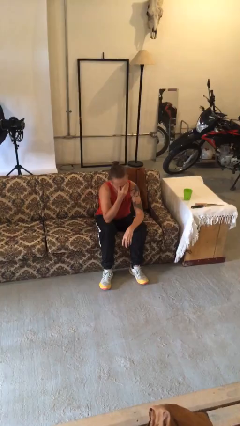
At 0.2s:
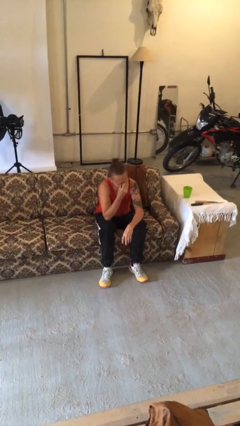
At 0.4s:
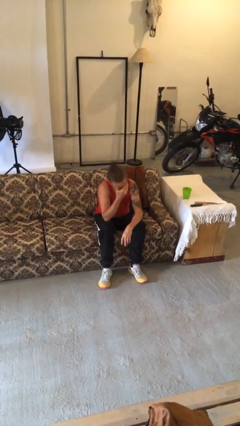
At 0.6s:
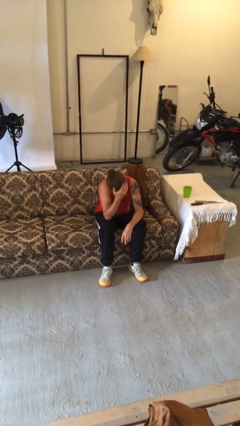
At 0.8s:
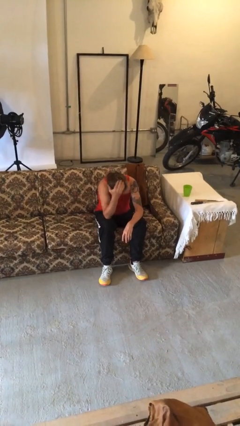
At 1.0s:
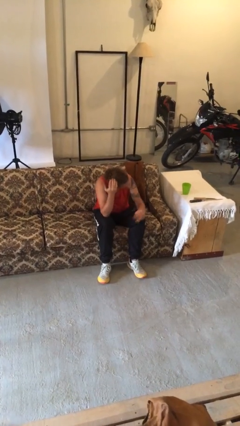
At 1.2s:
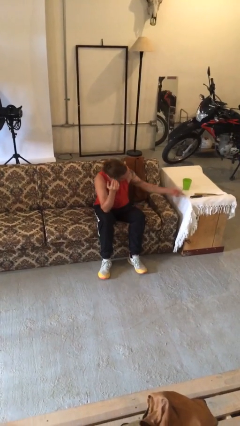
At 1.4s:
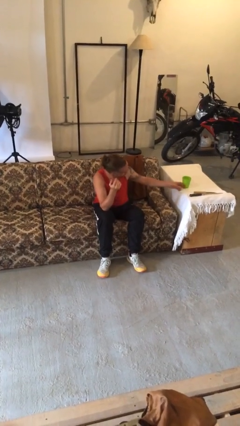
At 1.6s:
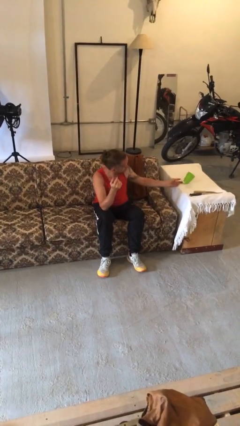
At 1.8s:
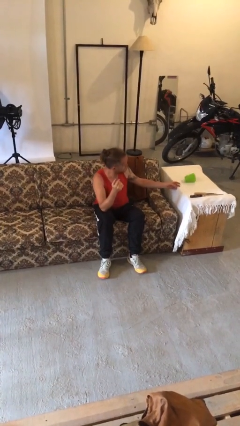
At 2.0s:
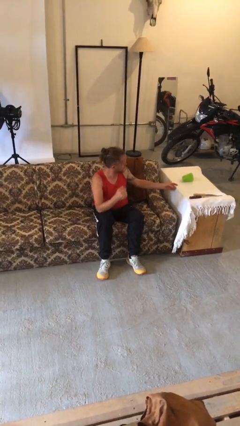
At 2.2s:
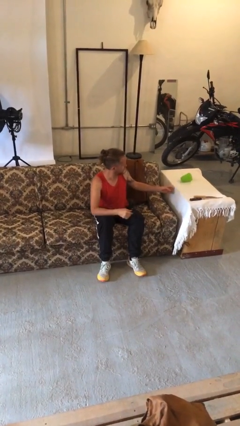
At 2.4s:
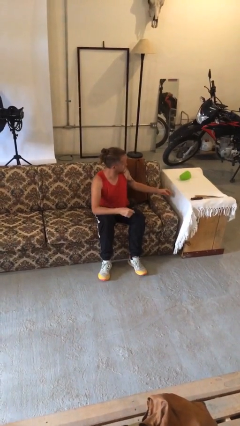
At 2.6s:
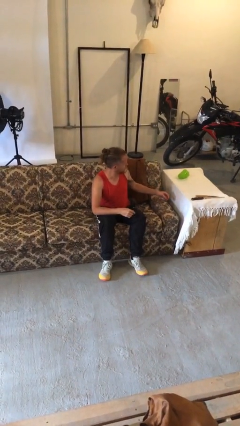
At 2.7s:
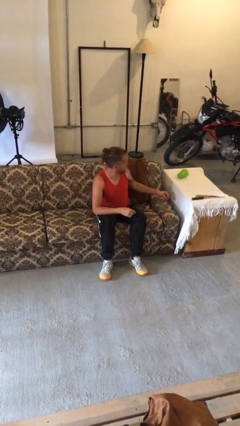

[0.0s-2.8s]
person knocks over glass

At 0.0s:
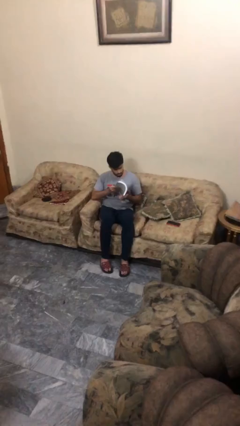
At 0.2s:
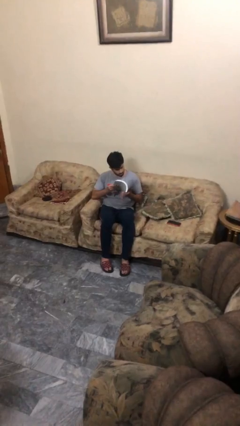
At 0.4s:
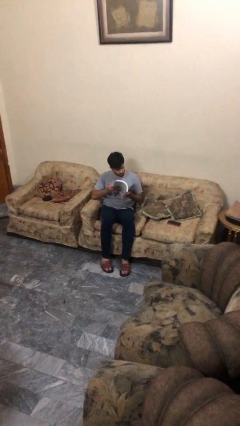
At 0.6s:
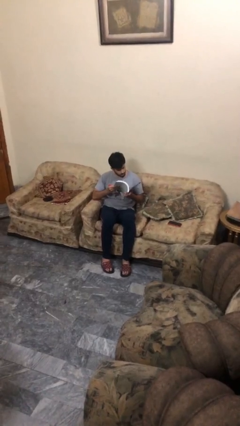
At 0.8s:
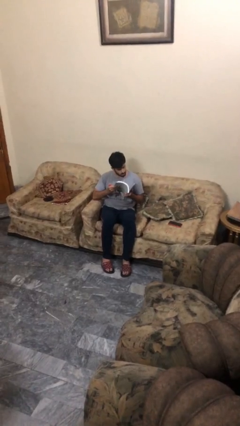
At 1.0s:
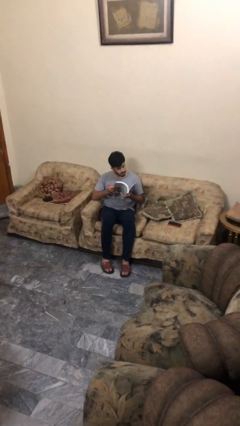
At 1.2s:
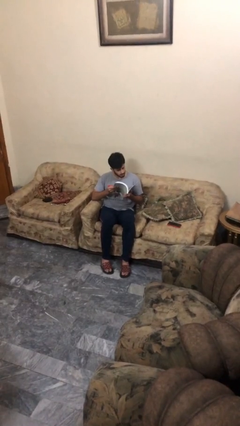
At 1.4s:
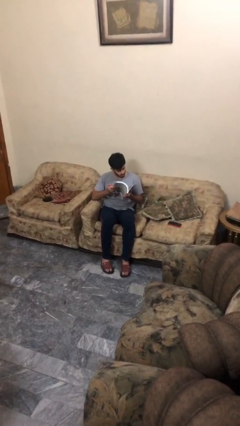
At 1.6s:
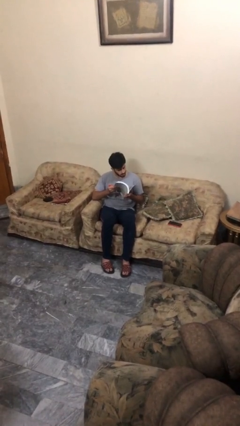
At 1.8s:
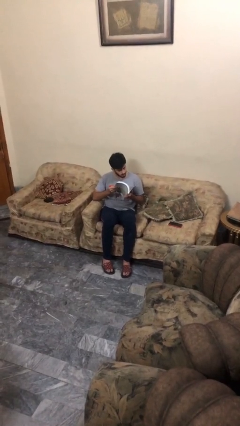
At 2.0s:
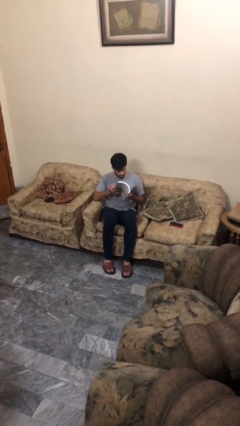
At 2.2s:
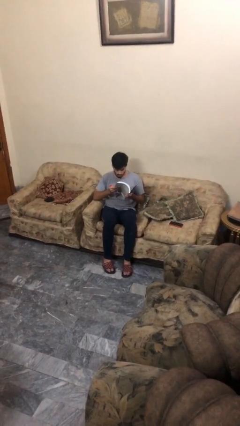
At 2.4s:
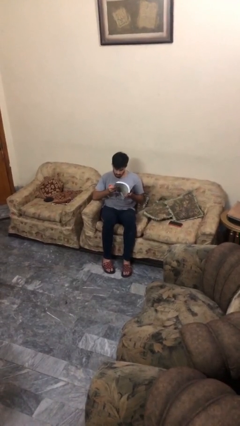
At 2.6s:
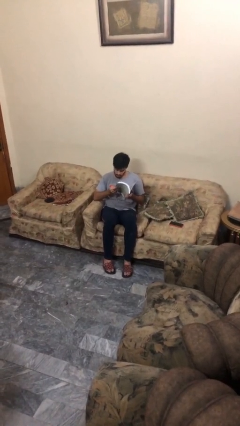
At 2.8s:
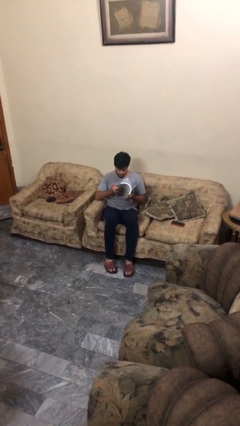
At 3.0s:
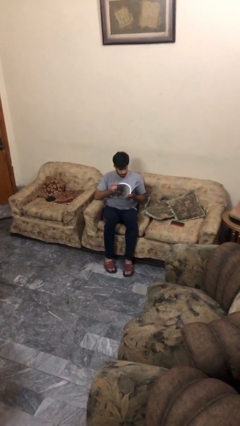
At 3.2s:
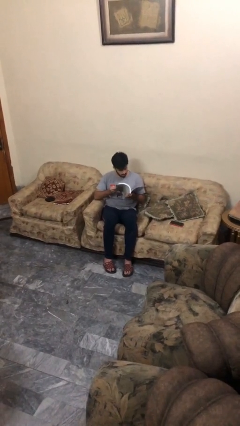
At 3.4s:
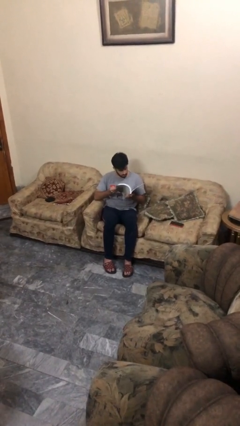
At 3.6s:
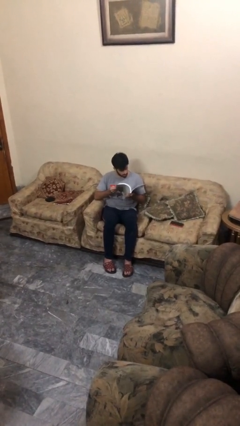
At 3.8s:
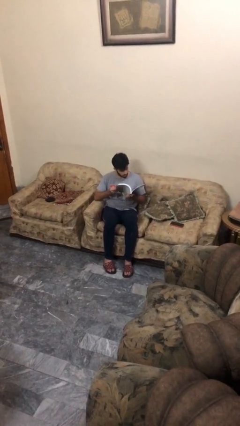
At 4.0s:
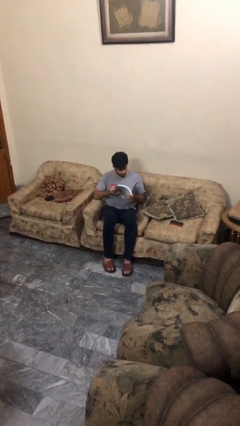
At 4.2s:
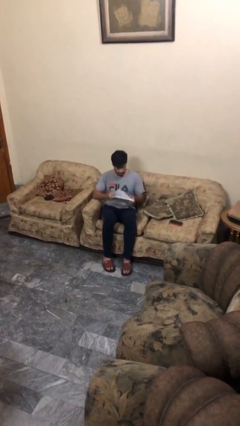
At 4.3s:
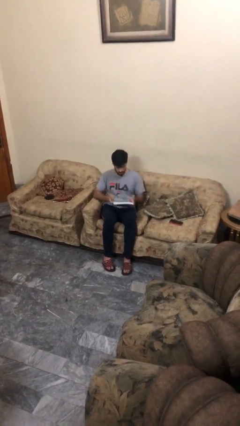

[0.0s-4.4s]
person reads book

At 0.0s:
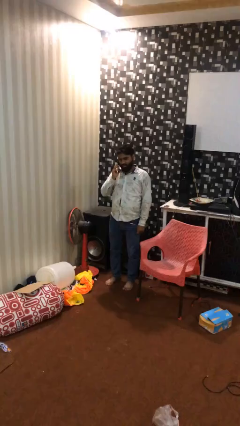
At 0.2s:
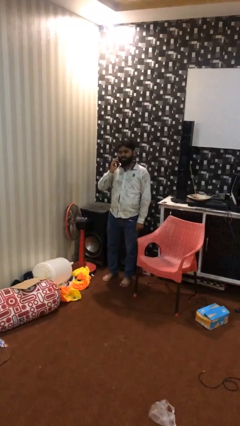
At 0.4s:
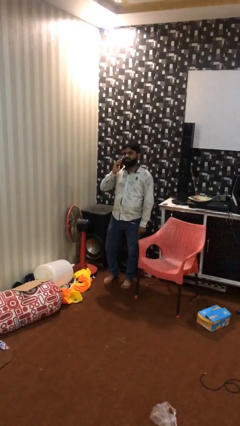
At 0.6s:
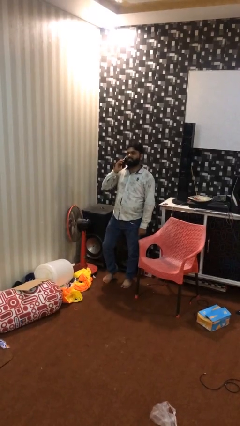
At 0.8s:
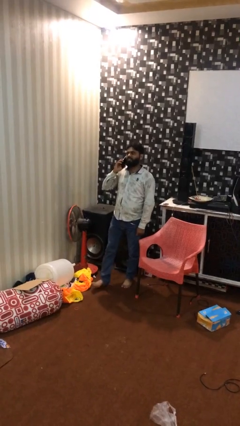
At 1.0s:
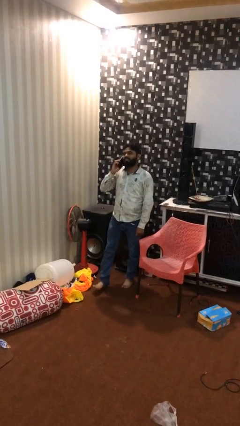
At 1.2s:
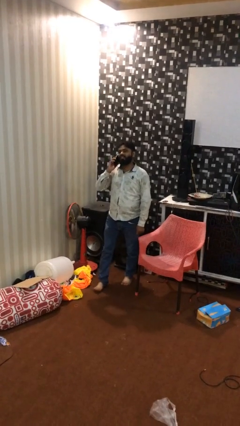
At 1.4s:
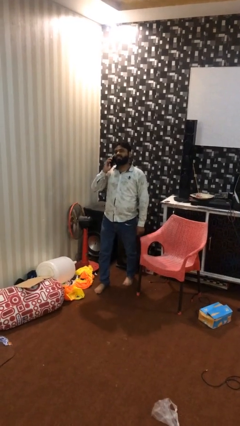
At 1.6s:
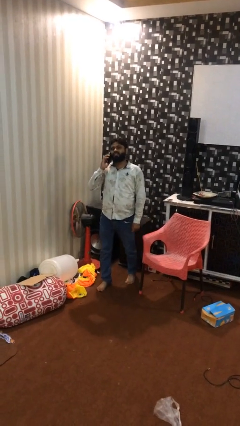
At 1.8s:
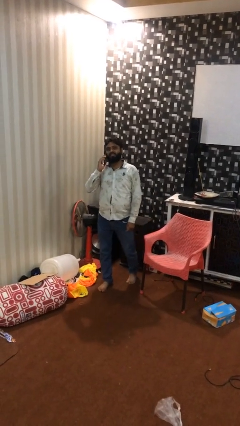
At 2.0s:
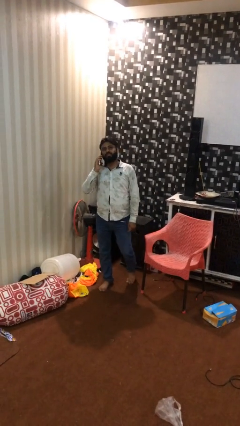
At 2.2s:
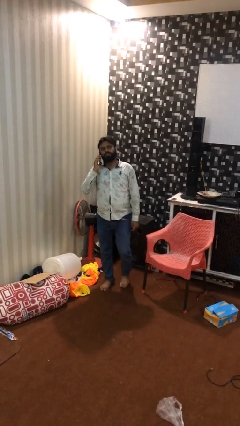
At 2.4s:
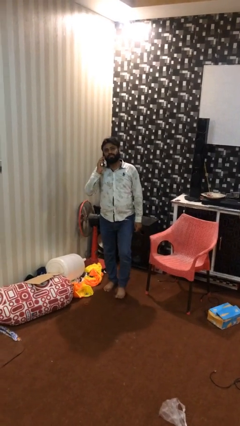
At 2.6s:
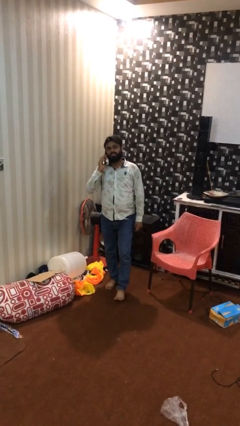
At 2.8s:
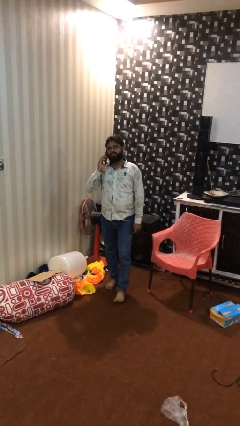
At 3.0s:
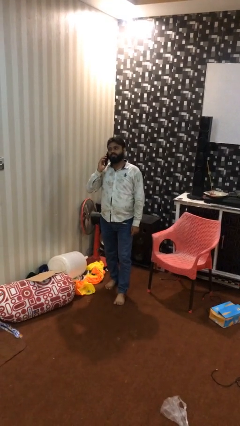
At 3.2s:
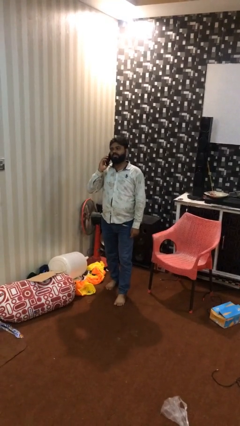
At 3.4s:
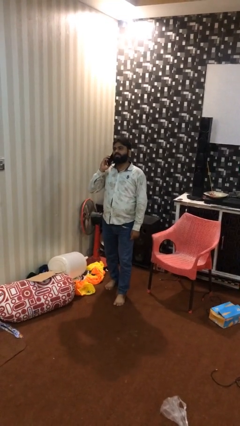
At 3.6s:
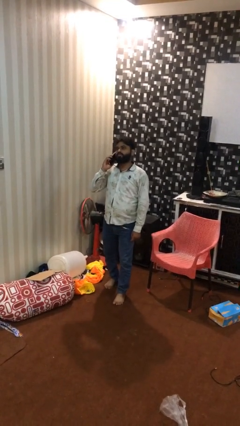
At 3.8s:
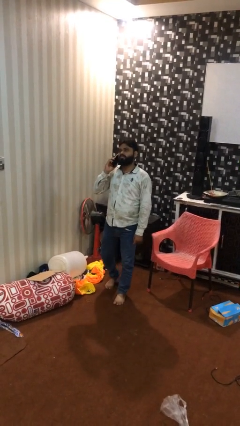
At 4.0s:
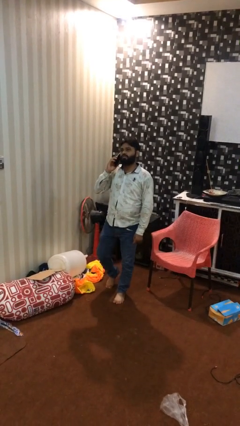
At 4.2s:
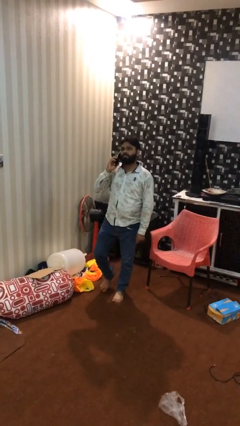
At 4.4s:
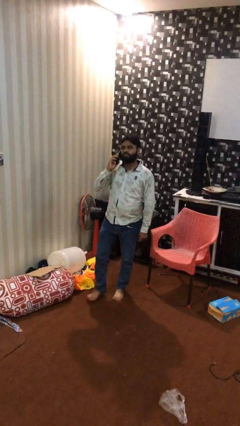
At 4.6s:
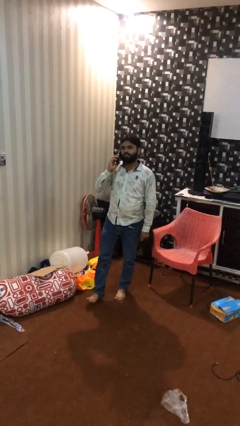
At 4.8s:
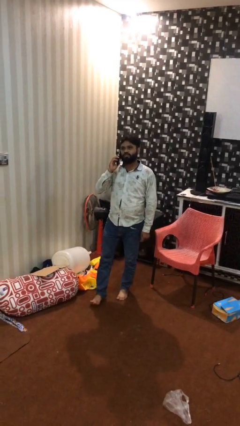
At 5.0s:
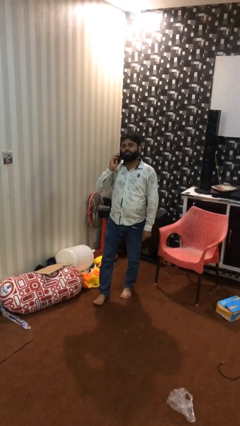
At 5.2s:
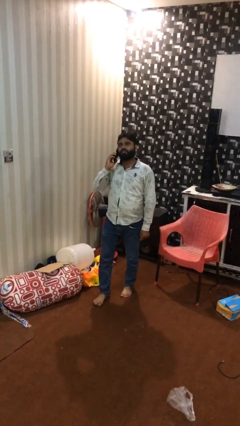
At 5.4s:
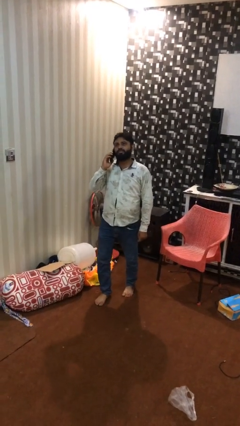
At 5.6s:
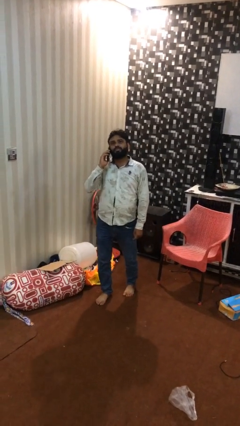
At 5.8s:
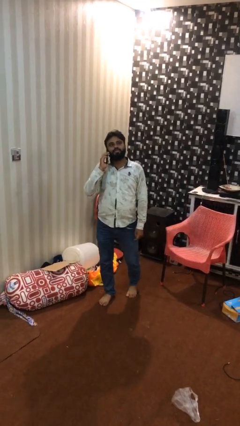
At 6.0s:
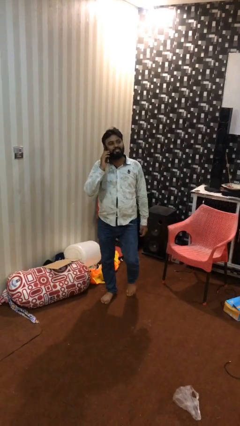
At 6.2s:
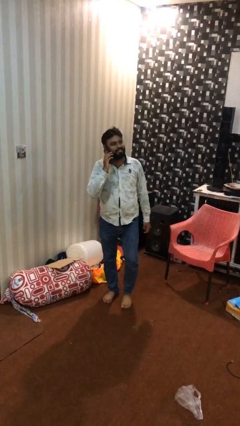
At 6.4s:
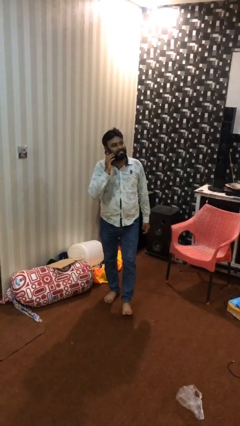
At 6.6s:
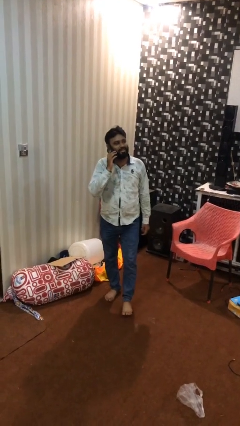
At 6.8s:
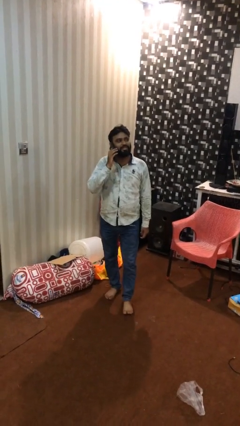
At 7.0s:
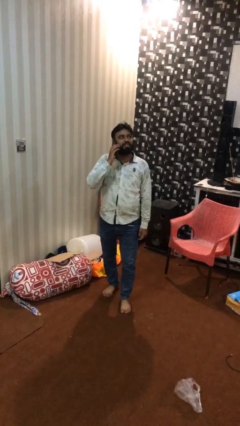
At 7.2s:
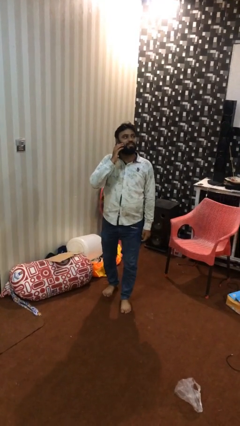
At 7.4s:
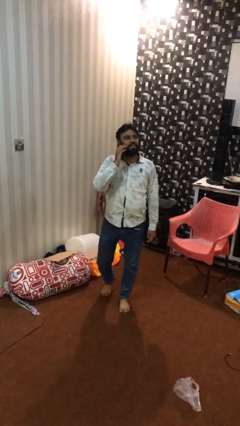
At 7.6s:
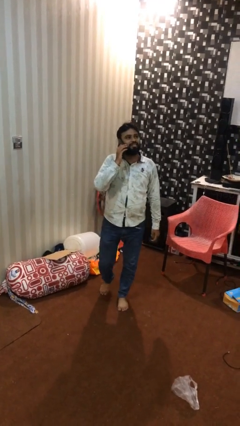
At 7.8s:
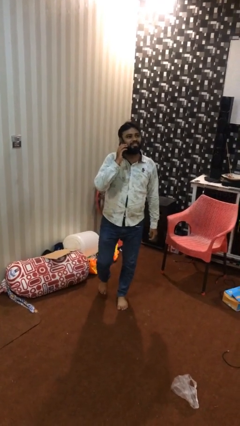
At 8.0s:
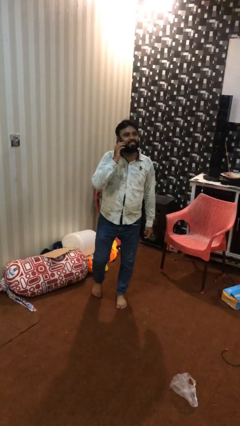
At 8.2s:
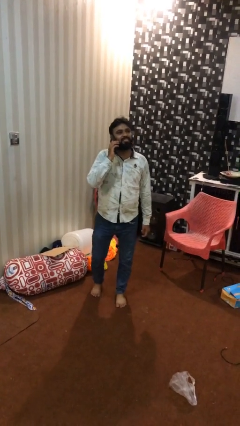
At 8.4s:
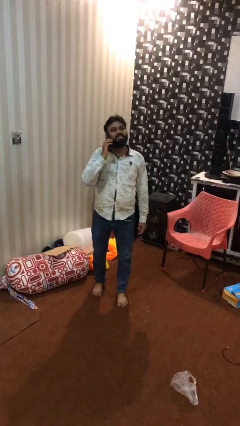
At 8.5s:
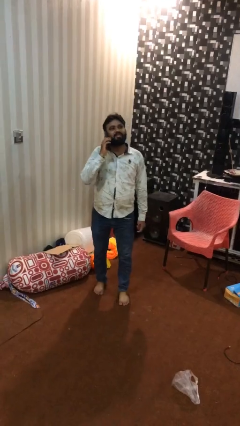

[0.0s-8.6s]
person talks on phone

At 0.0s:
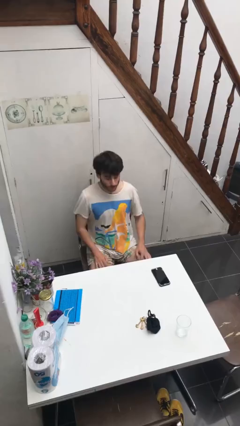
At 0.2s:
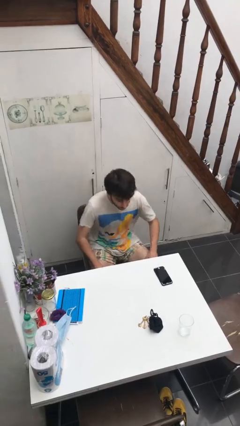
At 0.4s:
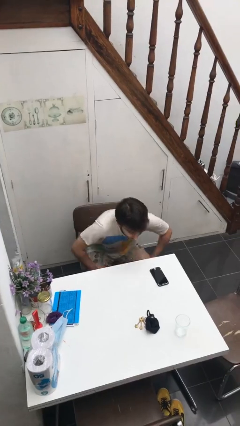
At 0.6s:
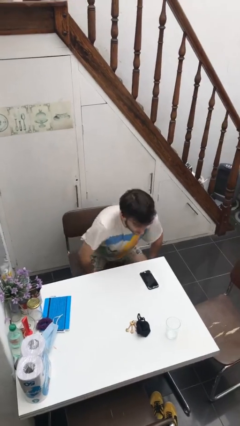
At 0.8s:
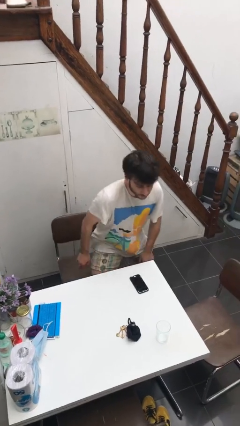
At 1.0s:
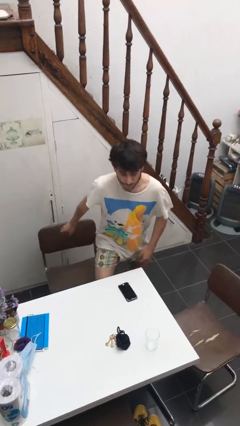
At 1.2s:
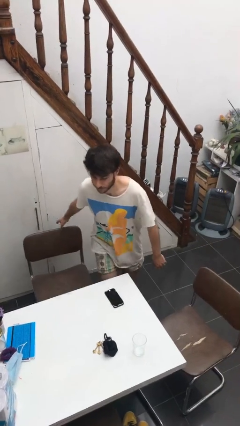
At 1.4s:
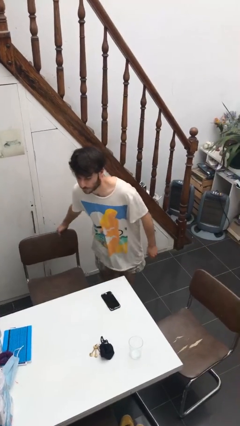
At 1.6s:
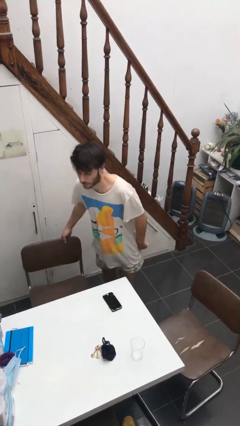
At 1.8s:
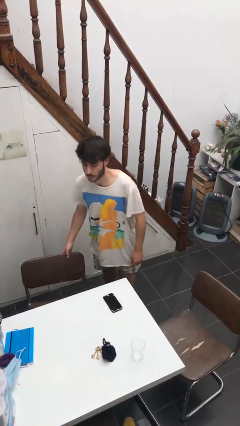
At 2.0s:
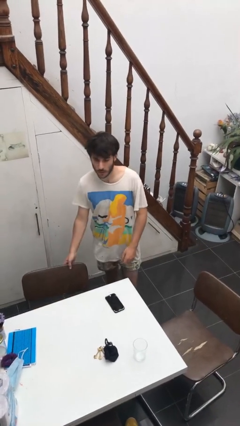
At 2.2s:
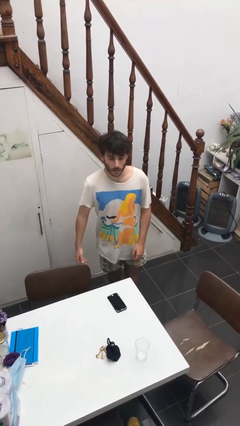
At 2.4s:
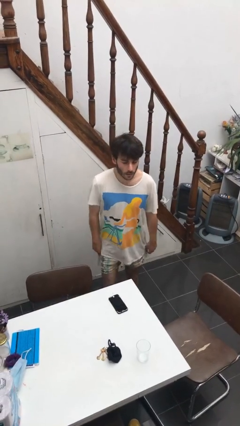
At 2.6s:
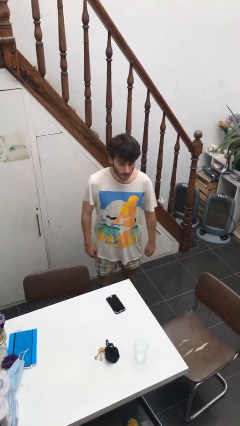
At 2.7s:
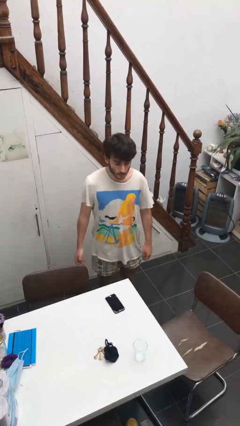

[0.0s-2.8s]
person stands up
